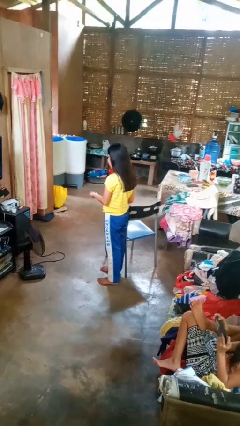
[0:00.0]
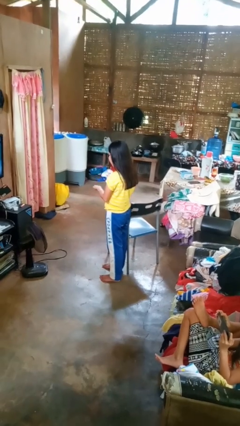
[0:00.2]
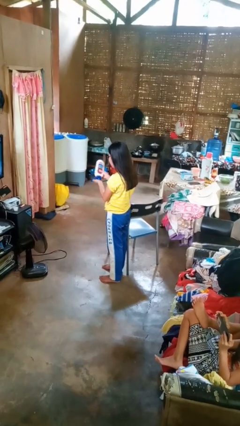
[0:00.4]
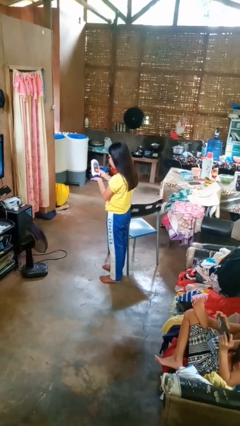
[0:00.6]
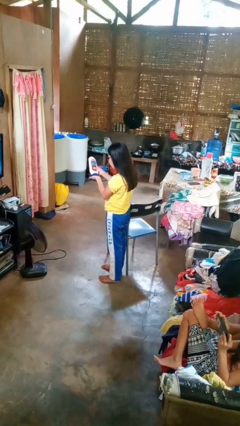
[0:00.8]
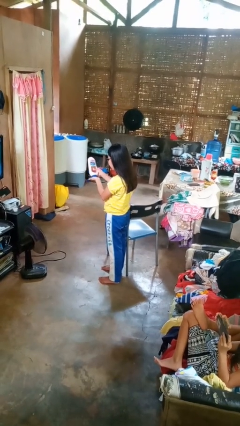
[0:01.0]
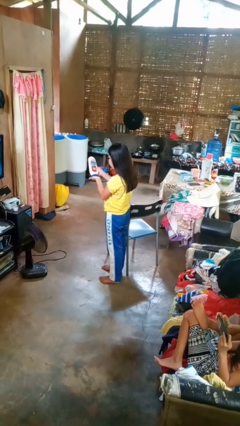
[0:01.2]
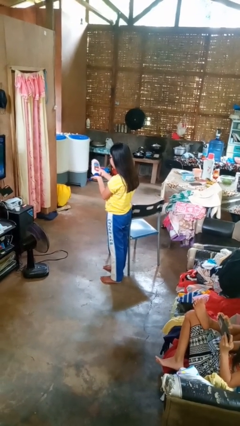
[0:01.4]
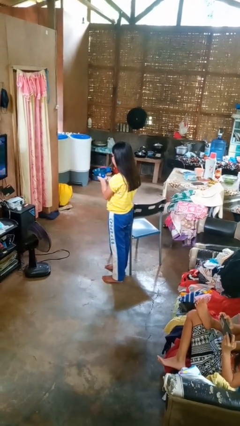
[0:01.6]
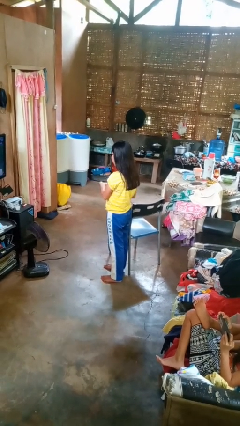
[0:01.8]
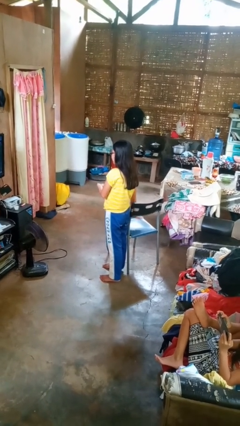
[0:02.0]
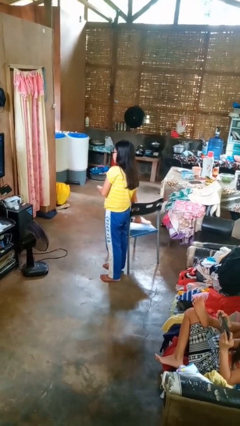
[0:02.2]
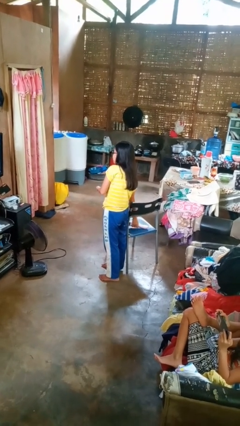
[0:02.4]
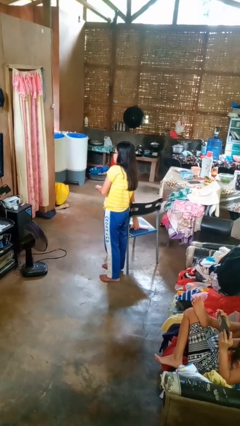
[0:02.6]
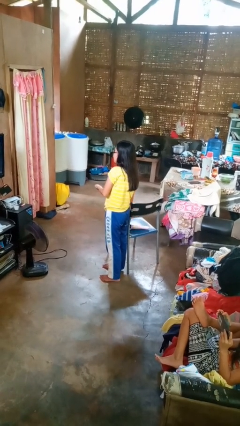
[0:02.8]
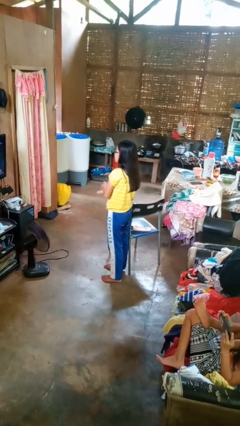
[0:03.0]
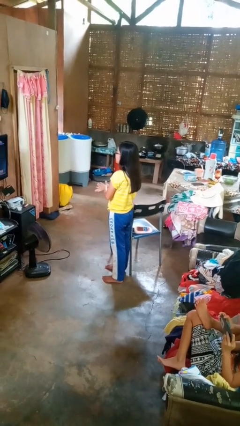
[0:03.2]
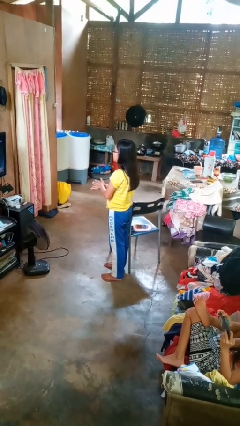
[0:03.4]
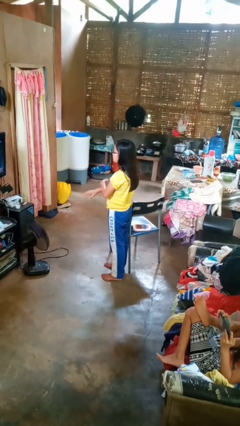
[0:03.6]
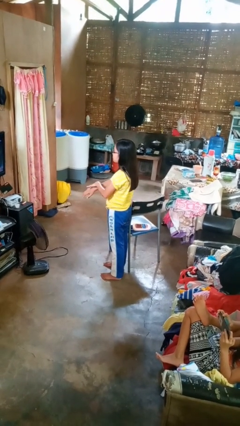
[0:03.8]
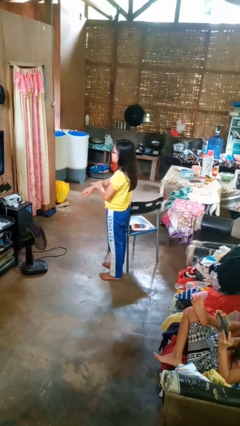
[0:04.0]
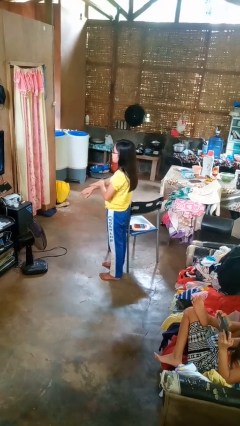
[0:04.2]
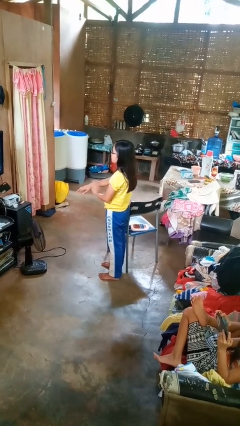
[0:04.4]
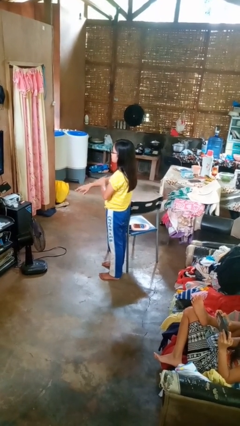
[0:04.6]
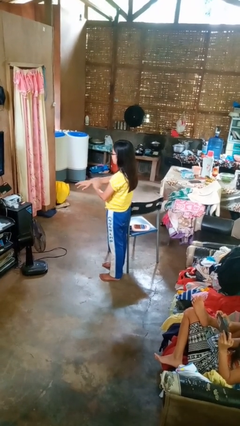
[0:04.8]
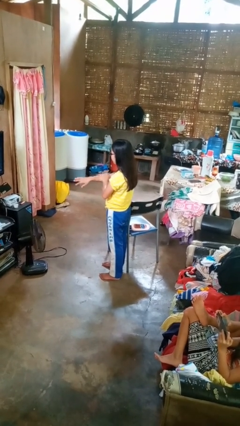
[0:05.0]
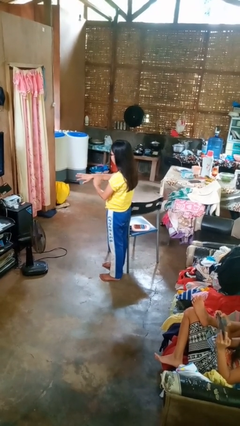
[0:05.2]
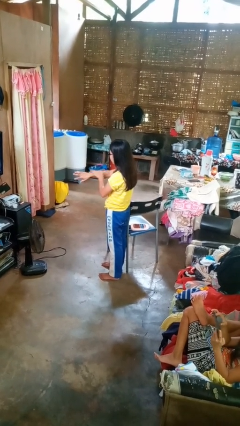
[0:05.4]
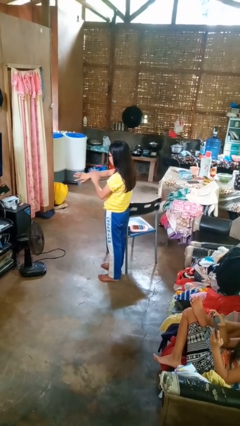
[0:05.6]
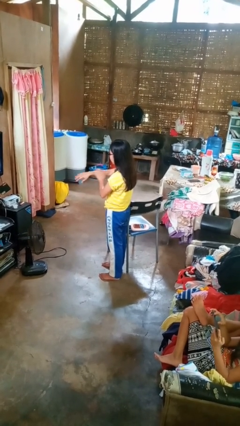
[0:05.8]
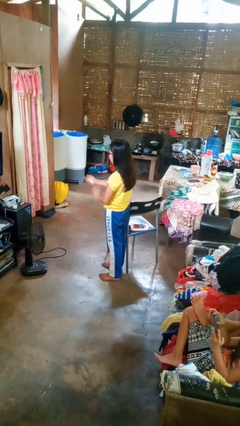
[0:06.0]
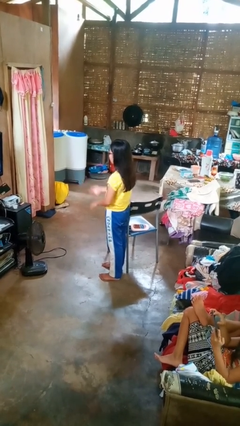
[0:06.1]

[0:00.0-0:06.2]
person applies sunscreen

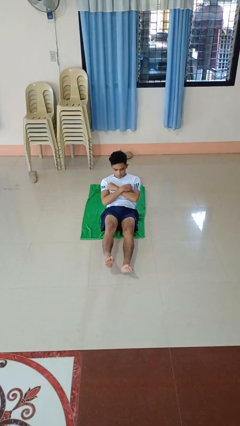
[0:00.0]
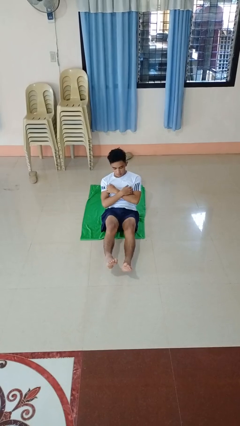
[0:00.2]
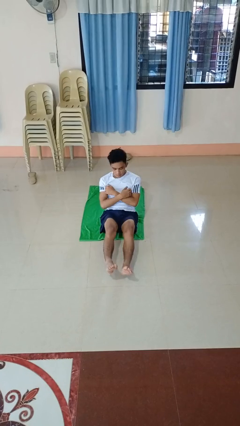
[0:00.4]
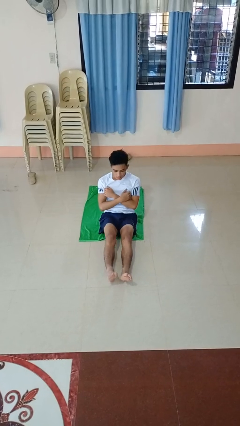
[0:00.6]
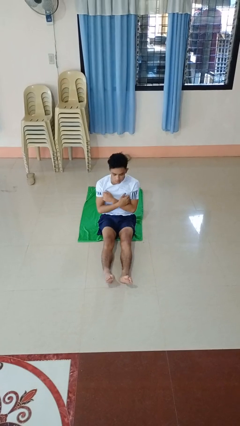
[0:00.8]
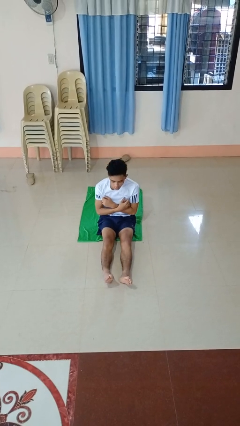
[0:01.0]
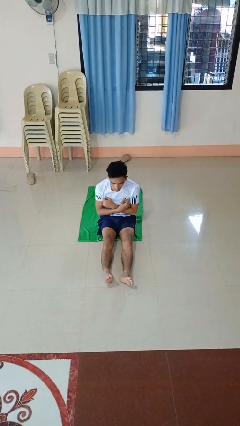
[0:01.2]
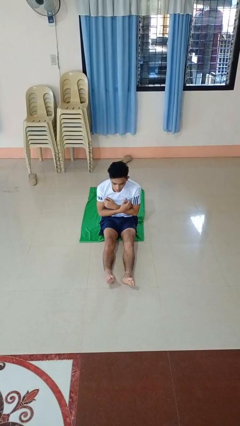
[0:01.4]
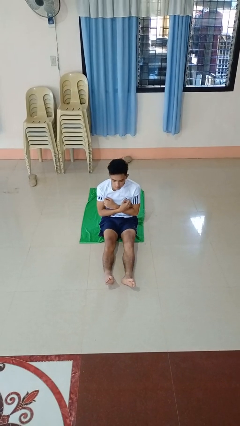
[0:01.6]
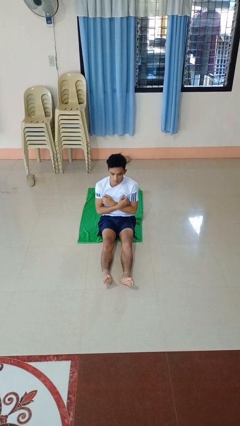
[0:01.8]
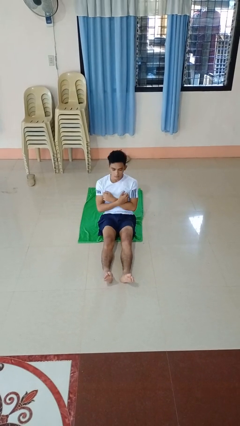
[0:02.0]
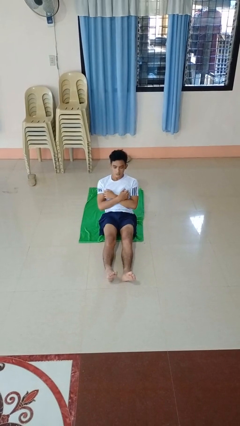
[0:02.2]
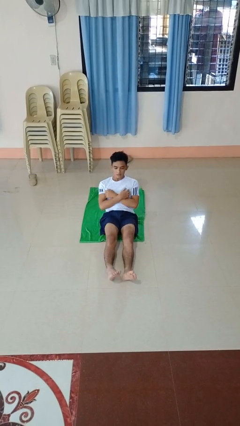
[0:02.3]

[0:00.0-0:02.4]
person exercises with situp

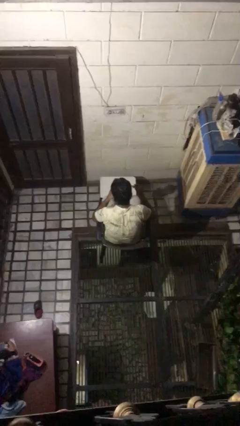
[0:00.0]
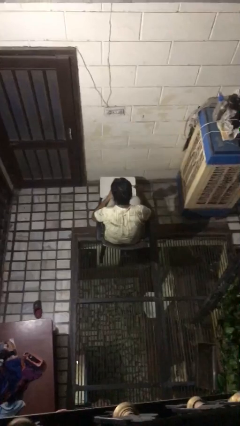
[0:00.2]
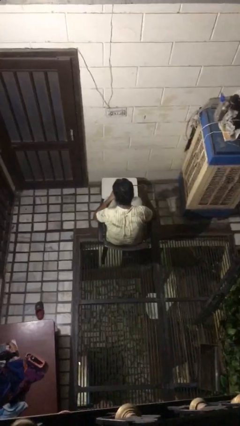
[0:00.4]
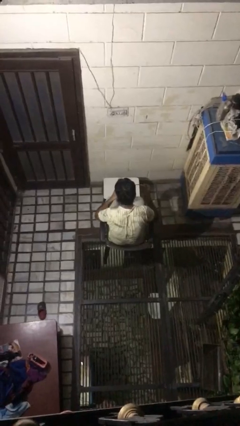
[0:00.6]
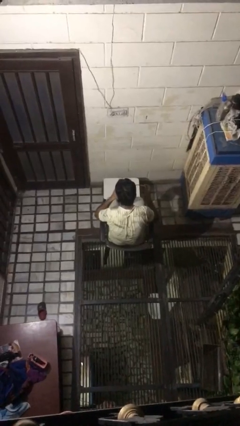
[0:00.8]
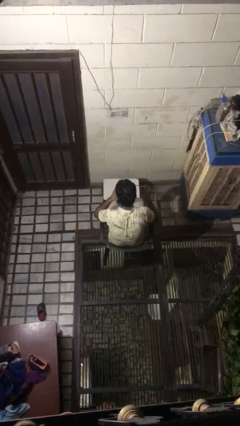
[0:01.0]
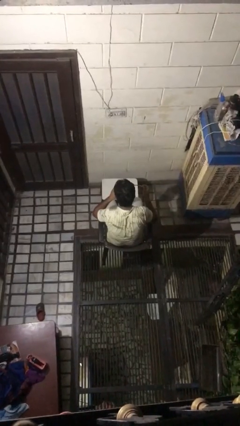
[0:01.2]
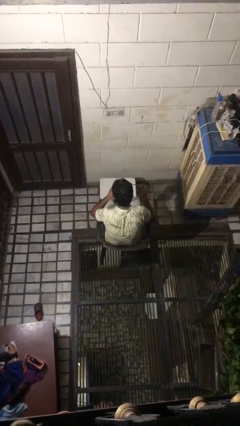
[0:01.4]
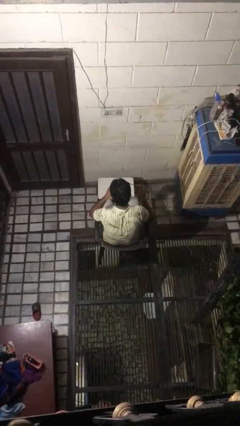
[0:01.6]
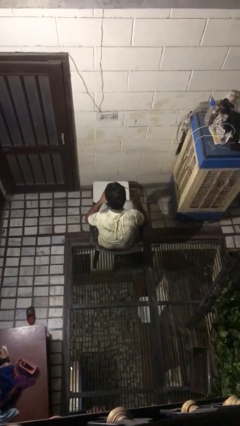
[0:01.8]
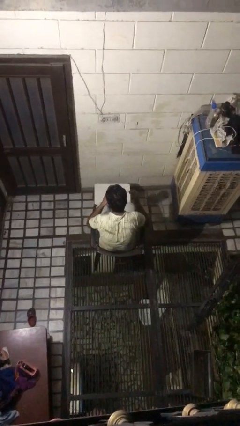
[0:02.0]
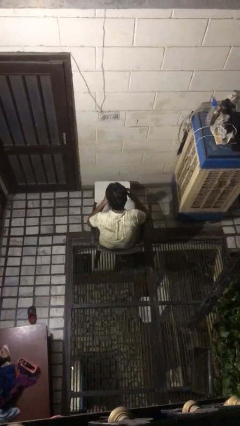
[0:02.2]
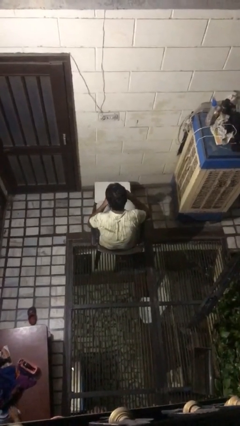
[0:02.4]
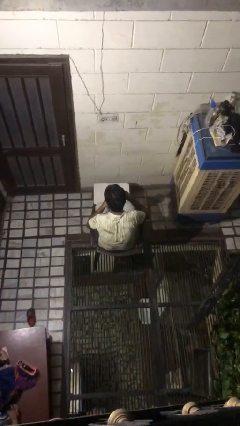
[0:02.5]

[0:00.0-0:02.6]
person drinks from mug

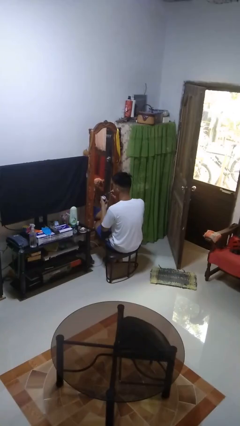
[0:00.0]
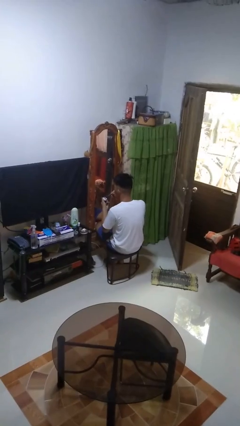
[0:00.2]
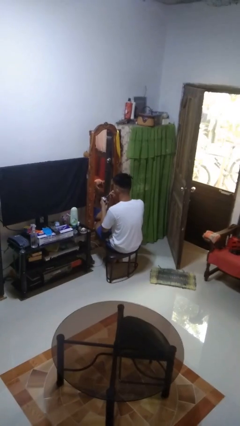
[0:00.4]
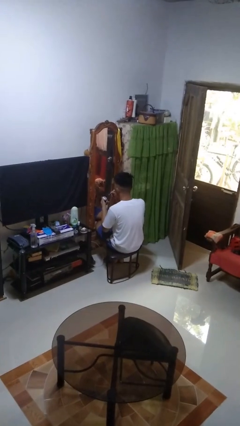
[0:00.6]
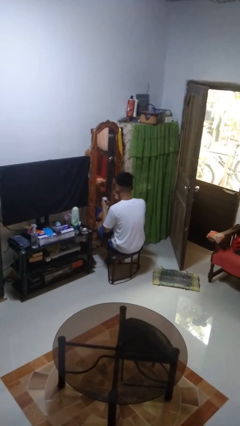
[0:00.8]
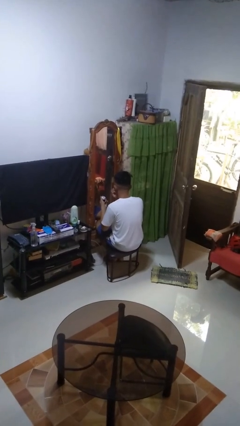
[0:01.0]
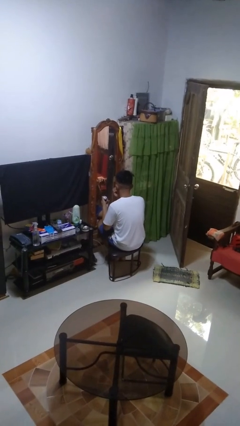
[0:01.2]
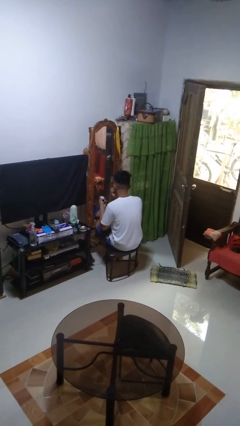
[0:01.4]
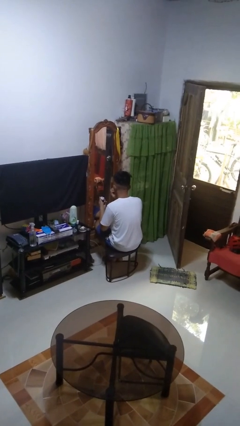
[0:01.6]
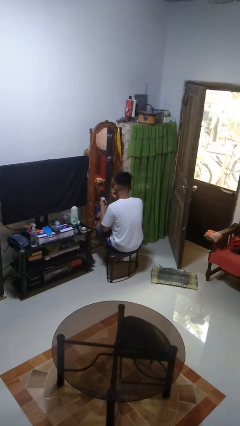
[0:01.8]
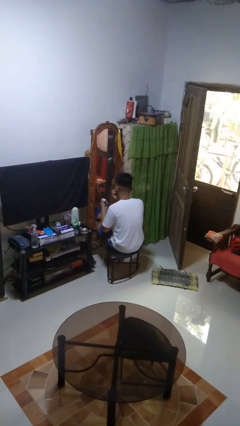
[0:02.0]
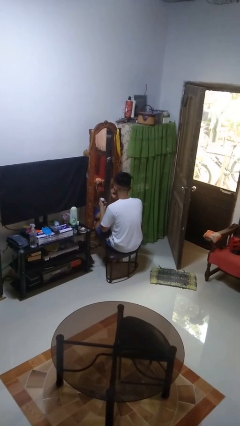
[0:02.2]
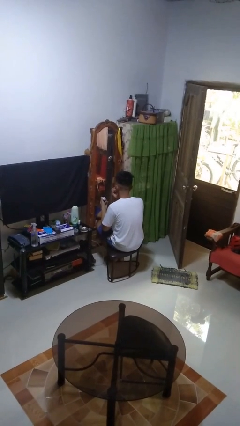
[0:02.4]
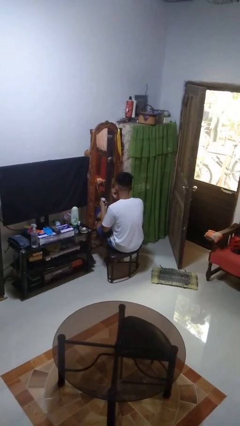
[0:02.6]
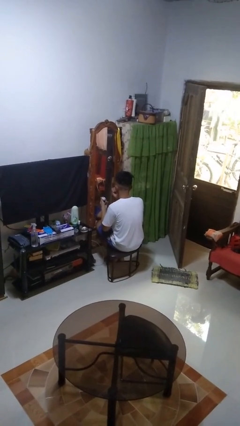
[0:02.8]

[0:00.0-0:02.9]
person applies eye makeup

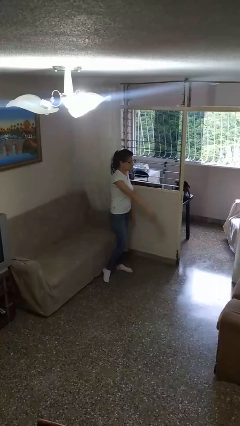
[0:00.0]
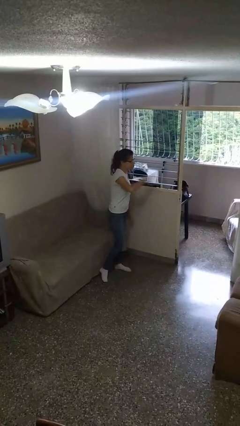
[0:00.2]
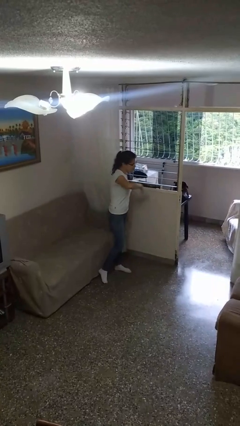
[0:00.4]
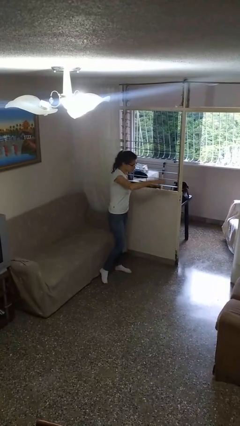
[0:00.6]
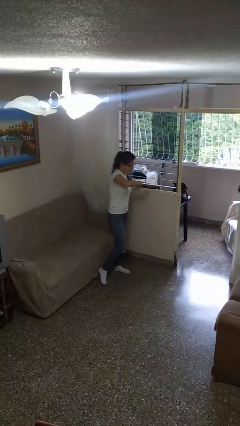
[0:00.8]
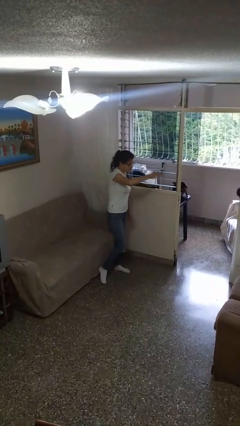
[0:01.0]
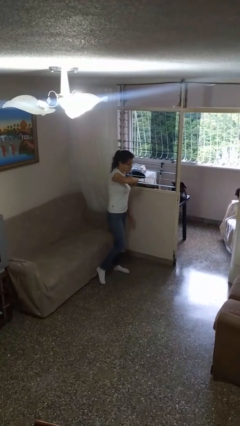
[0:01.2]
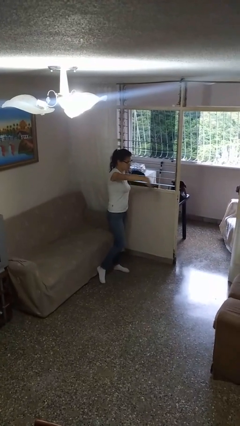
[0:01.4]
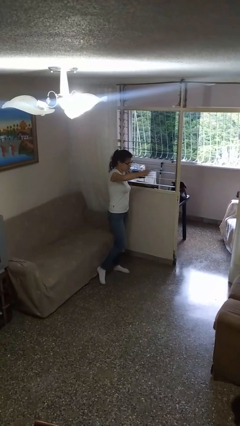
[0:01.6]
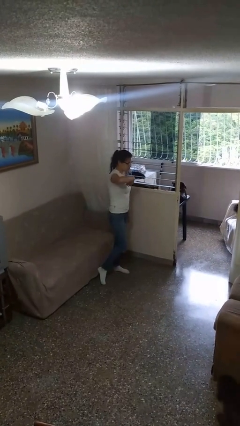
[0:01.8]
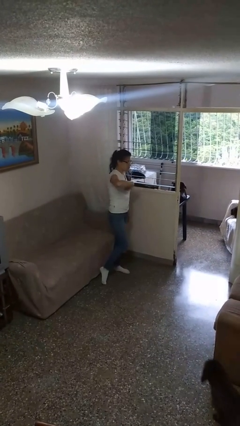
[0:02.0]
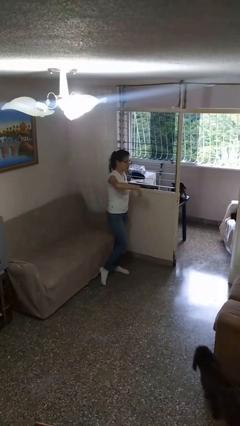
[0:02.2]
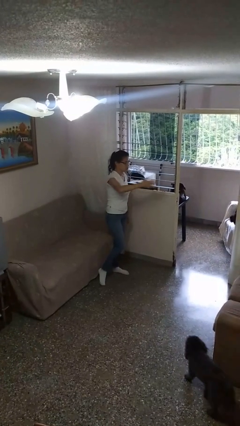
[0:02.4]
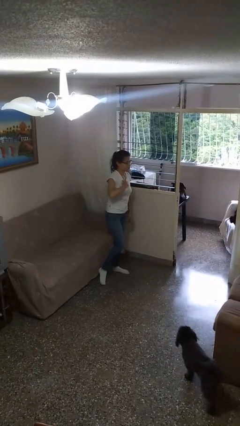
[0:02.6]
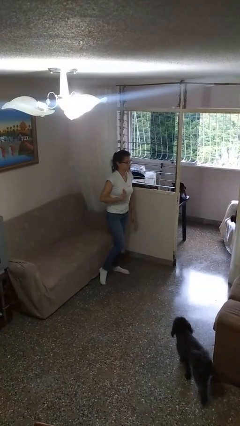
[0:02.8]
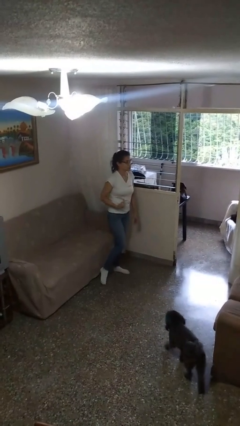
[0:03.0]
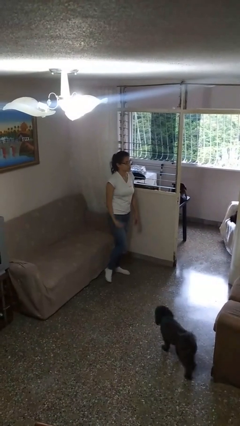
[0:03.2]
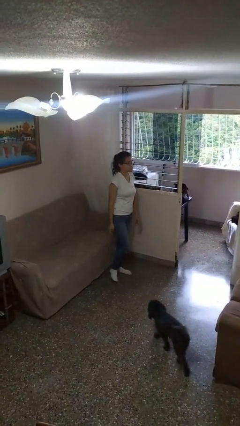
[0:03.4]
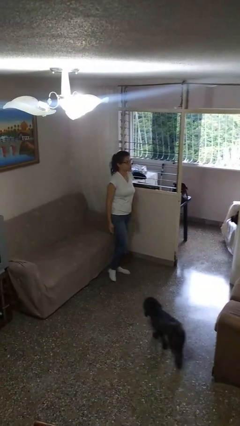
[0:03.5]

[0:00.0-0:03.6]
person gestures come here

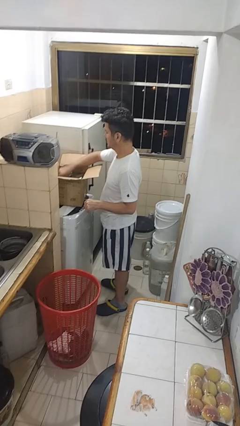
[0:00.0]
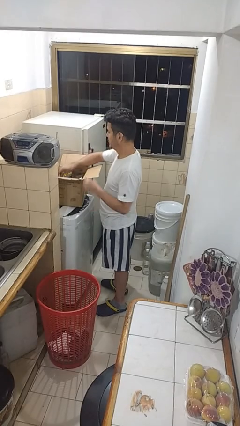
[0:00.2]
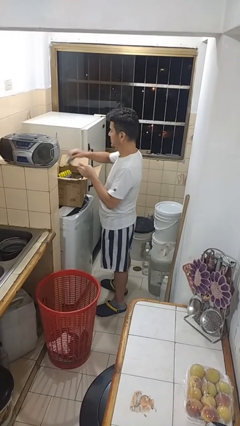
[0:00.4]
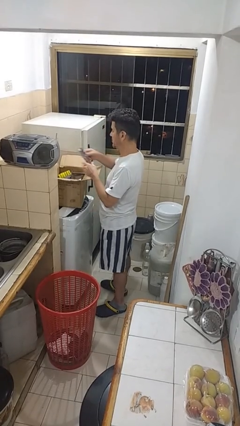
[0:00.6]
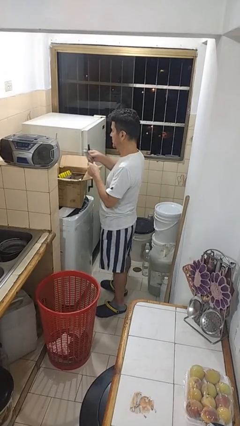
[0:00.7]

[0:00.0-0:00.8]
person takes object from box
